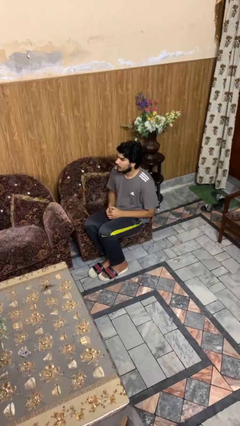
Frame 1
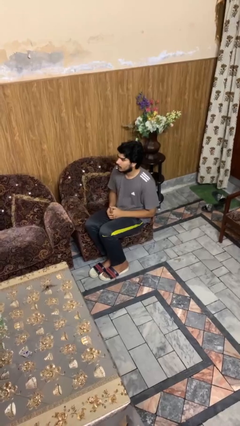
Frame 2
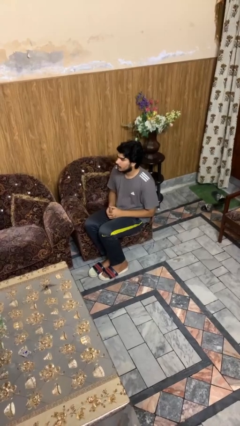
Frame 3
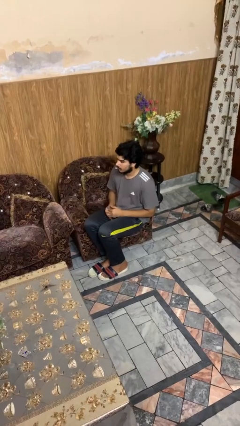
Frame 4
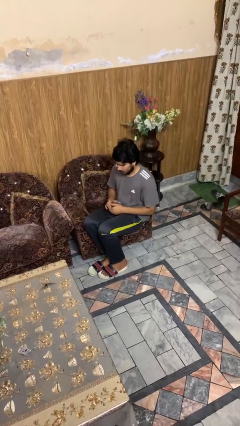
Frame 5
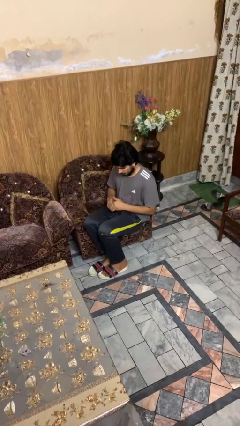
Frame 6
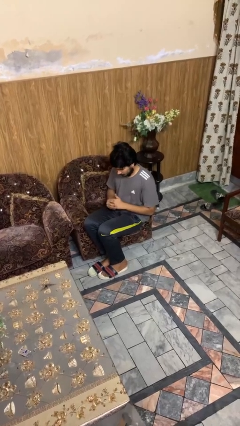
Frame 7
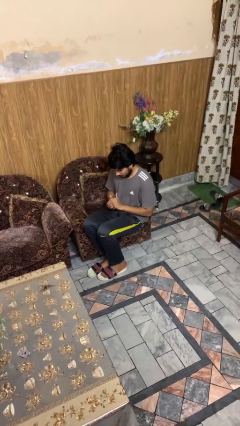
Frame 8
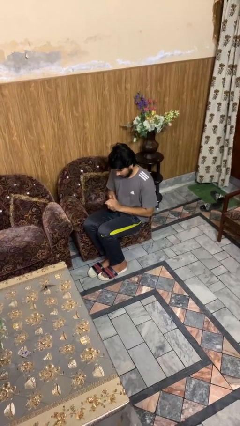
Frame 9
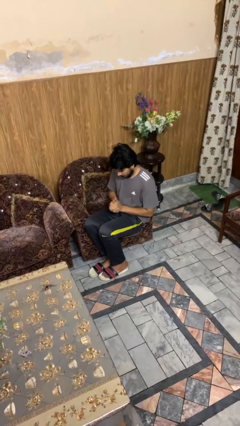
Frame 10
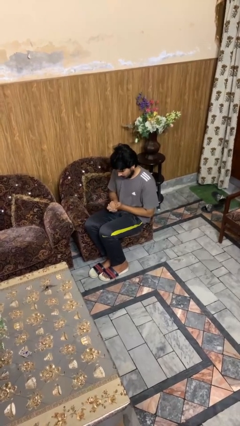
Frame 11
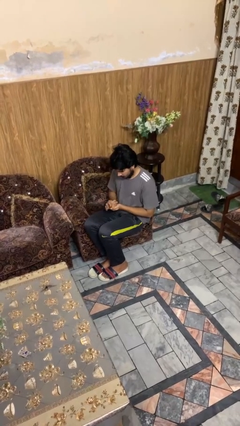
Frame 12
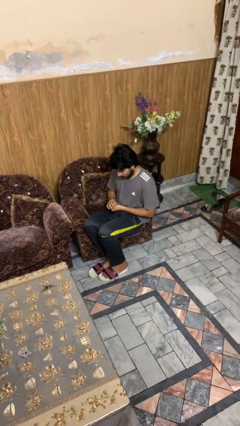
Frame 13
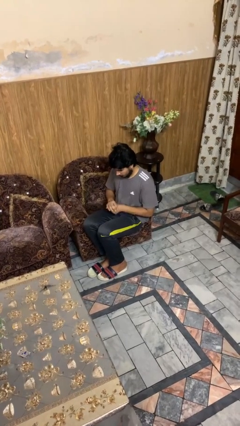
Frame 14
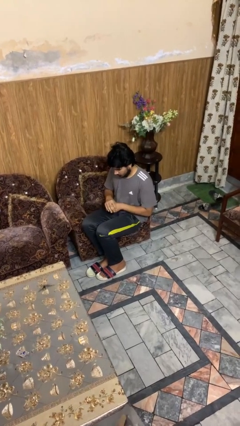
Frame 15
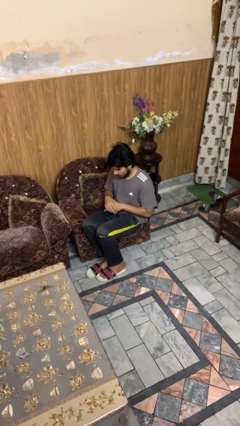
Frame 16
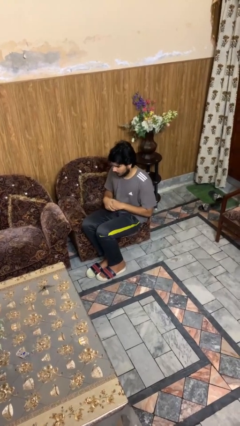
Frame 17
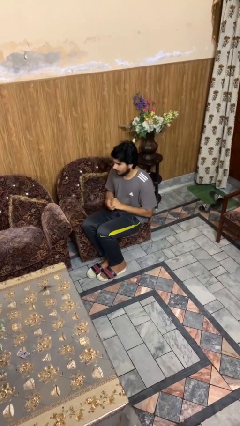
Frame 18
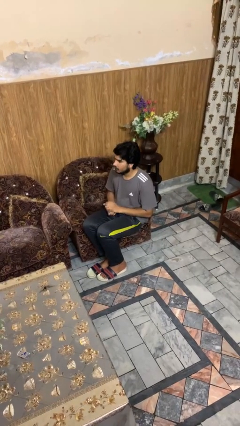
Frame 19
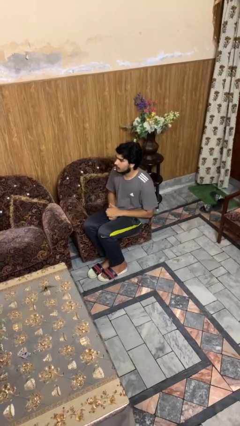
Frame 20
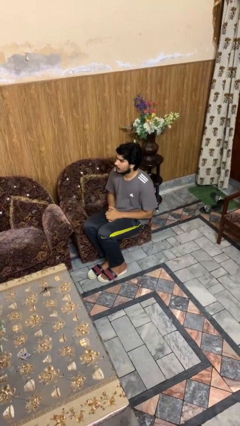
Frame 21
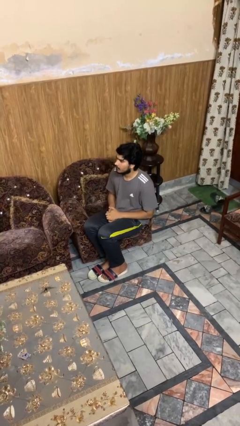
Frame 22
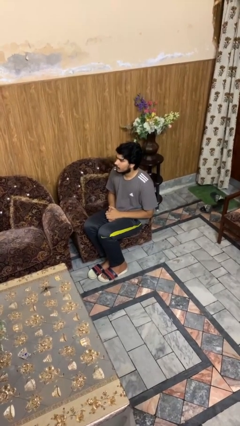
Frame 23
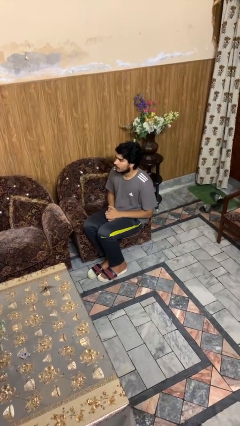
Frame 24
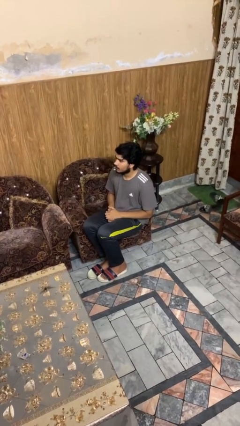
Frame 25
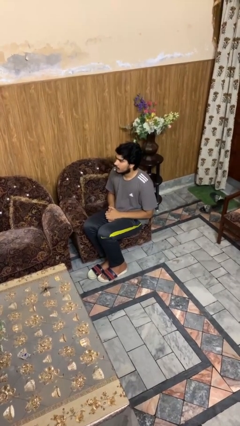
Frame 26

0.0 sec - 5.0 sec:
person looks at hands in lap

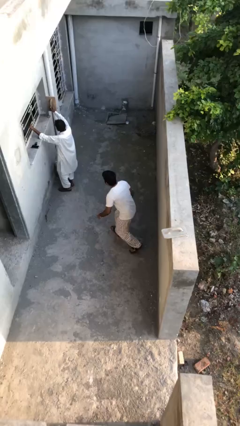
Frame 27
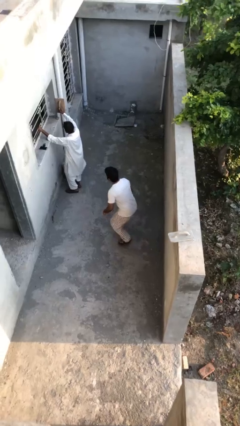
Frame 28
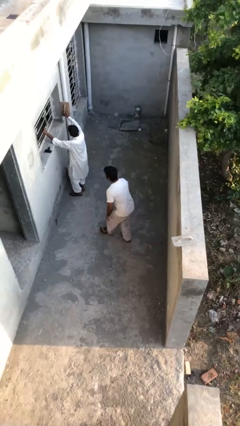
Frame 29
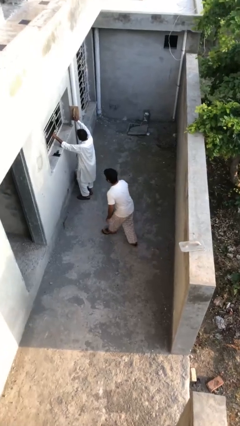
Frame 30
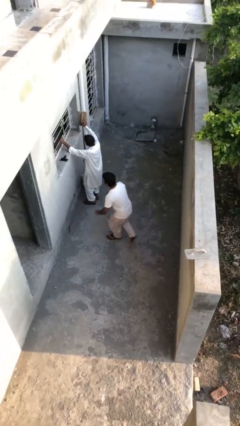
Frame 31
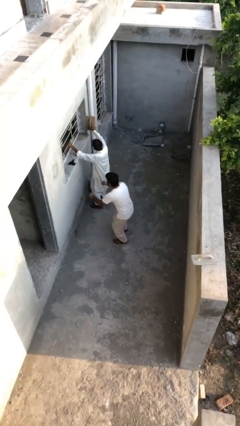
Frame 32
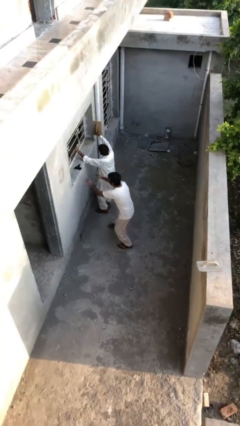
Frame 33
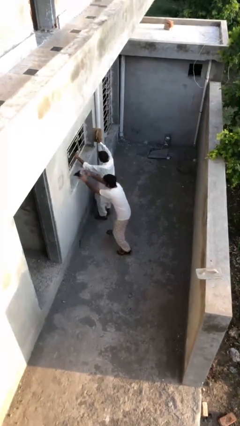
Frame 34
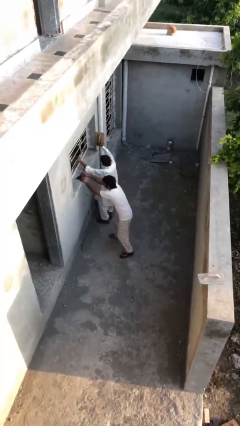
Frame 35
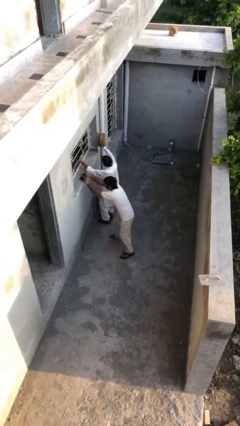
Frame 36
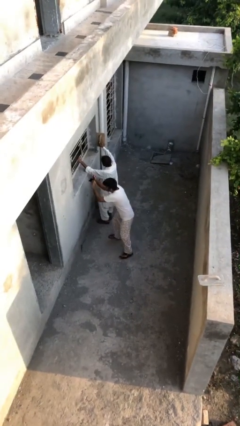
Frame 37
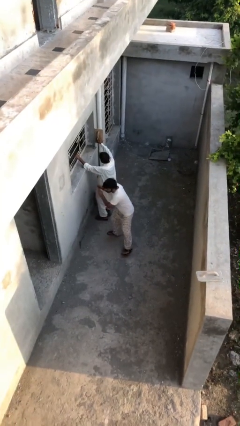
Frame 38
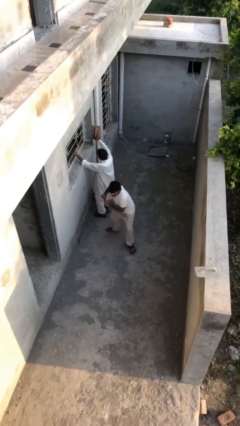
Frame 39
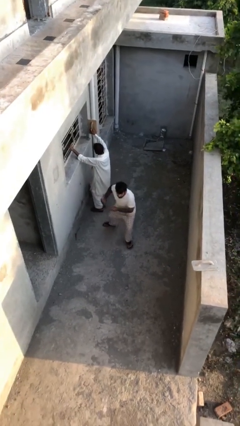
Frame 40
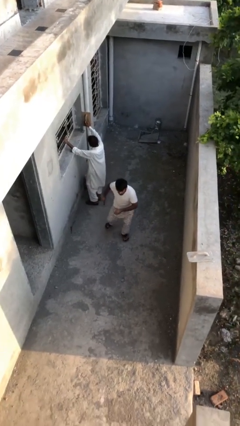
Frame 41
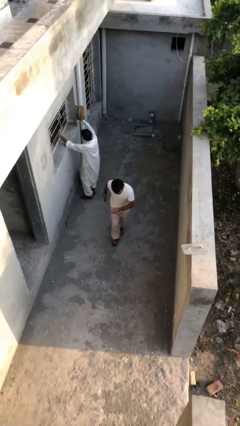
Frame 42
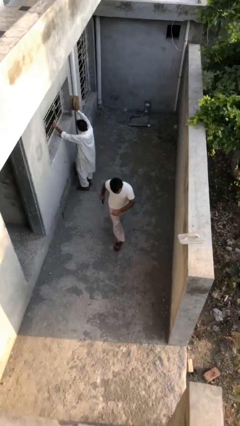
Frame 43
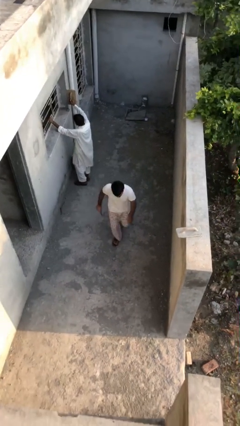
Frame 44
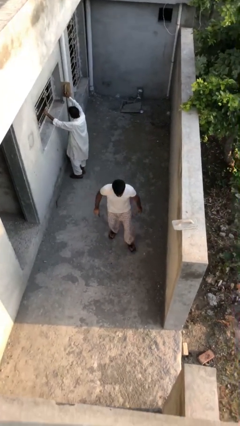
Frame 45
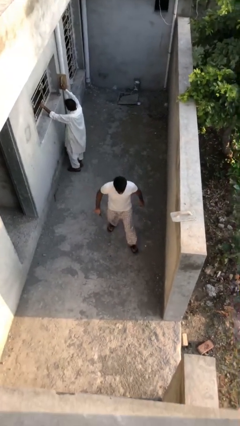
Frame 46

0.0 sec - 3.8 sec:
person steals object from person

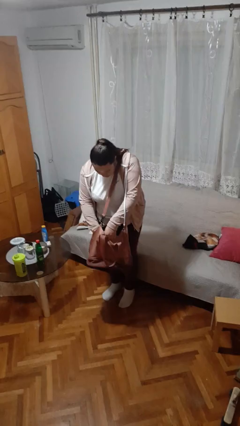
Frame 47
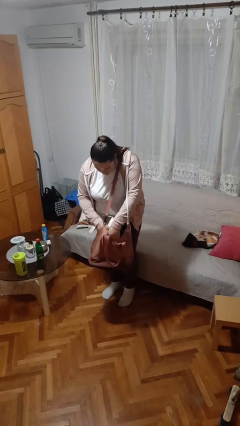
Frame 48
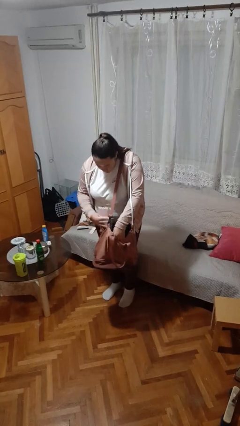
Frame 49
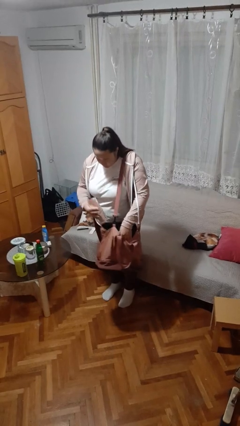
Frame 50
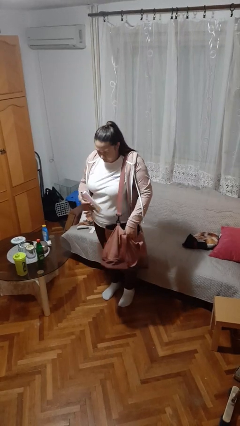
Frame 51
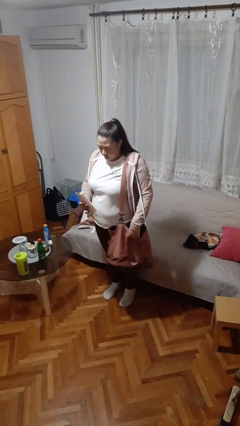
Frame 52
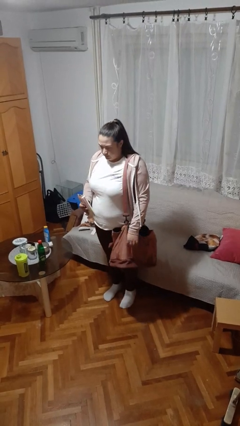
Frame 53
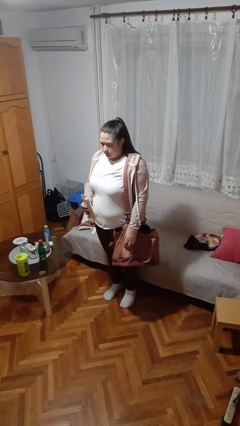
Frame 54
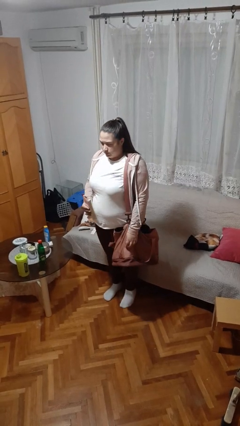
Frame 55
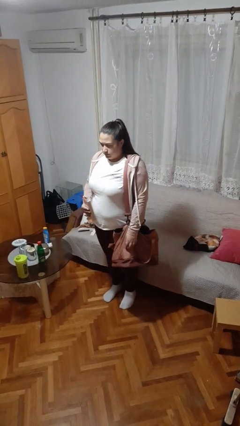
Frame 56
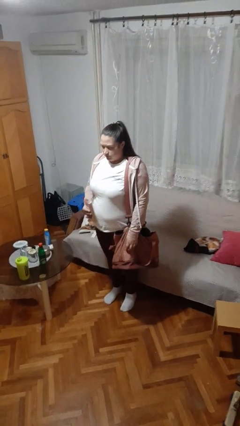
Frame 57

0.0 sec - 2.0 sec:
person takes object from purse

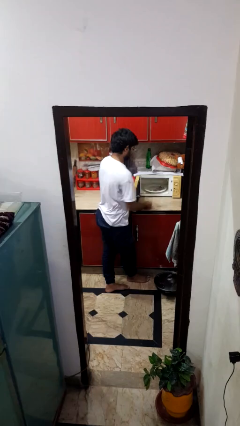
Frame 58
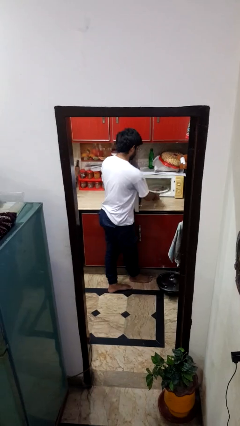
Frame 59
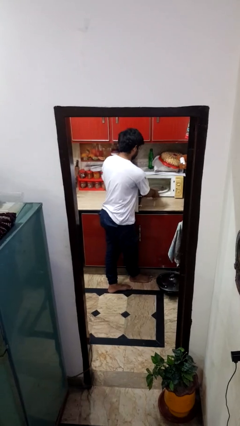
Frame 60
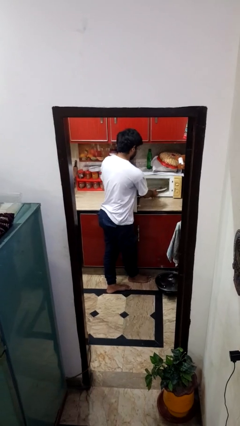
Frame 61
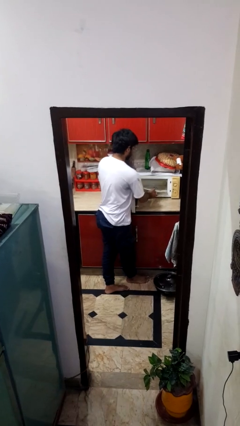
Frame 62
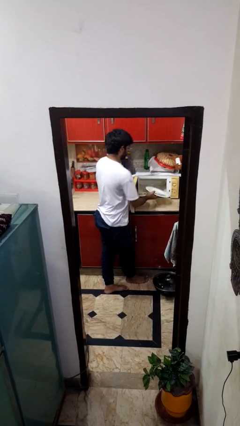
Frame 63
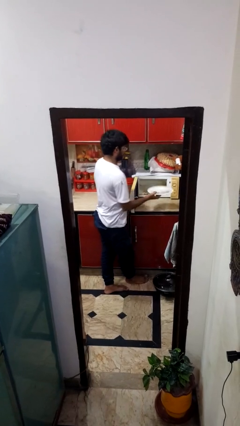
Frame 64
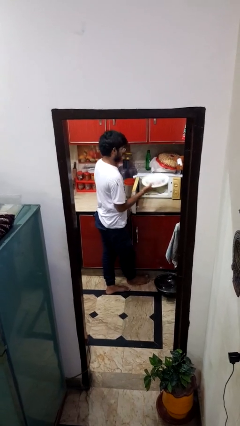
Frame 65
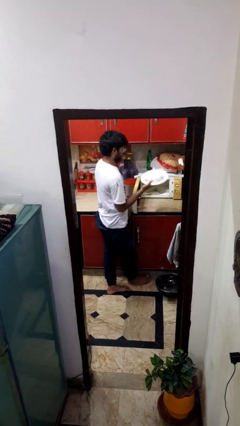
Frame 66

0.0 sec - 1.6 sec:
person takes object from oven

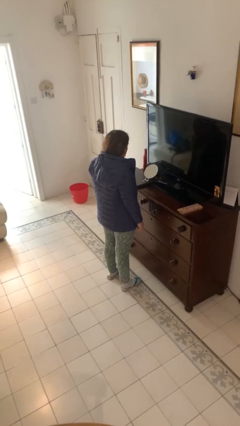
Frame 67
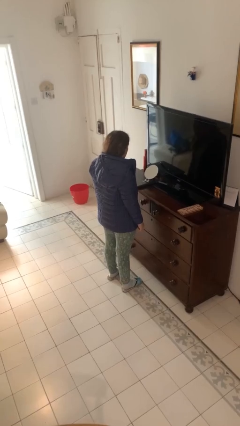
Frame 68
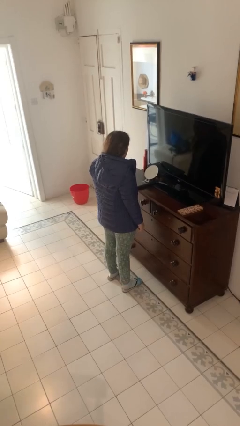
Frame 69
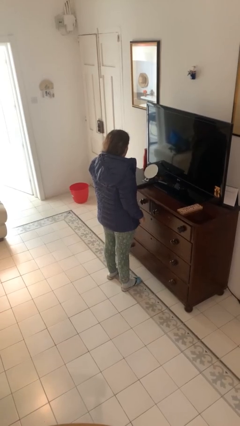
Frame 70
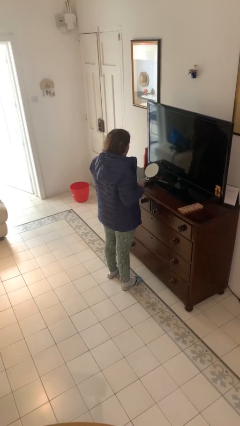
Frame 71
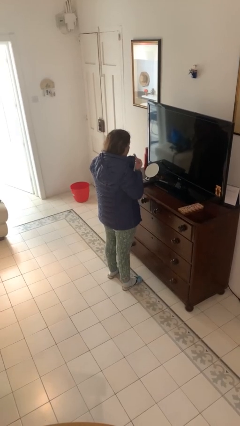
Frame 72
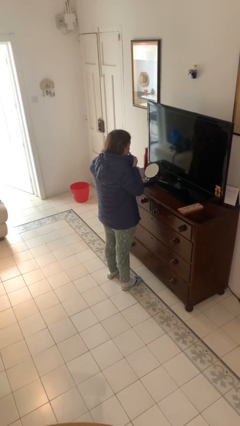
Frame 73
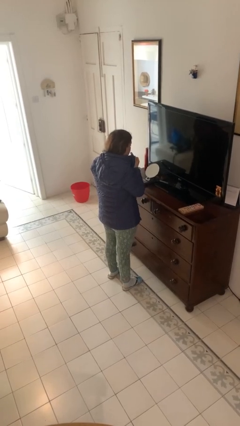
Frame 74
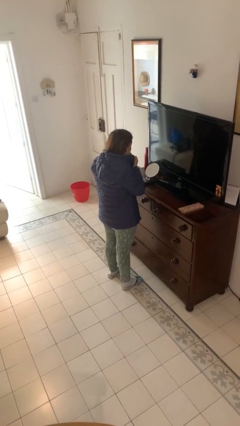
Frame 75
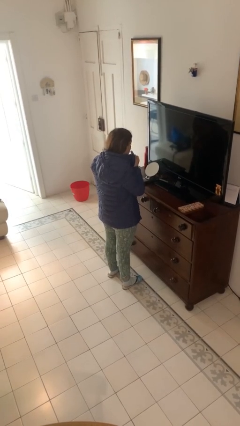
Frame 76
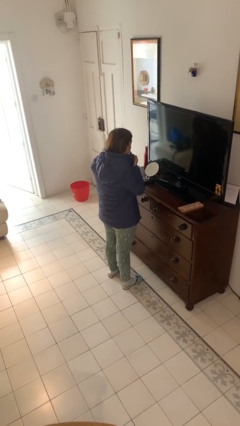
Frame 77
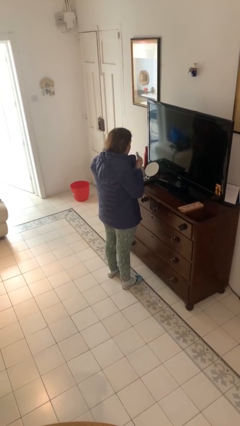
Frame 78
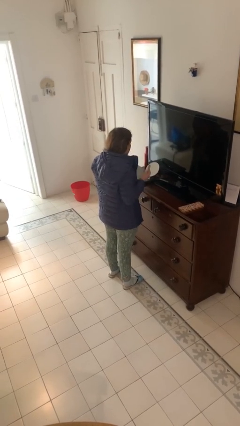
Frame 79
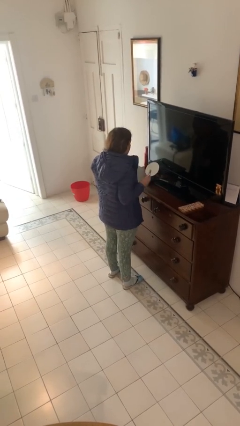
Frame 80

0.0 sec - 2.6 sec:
person applies lip makeup

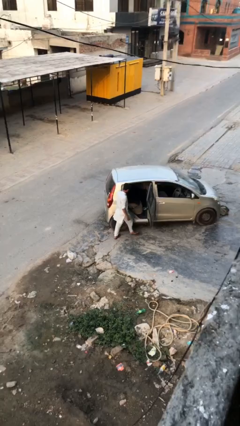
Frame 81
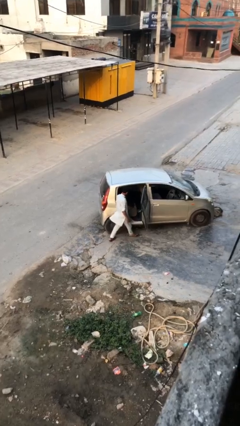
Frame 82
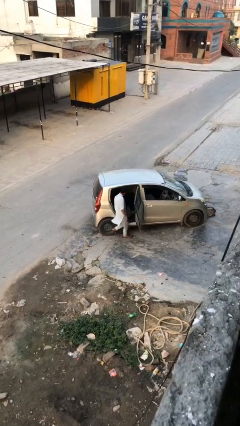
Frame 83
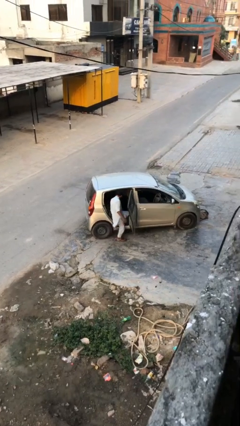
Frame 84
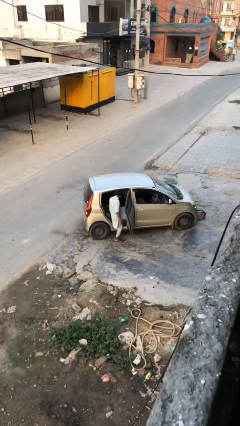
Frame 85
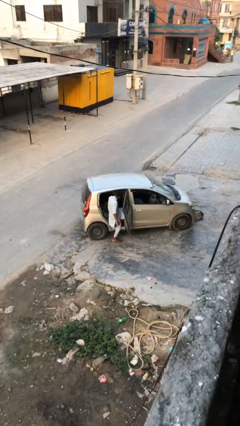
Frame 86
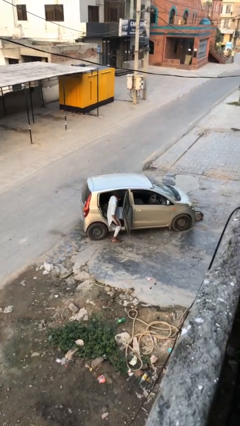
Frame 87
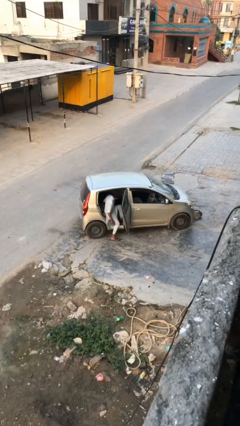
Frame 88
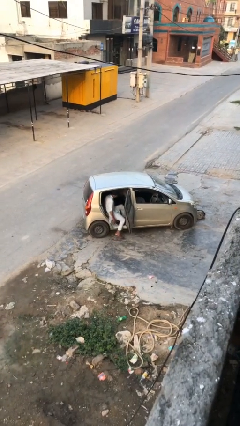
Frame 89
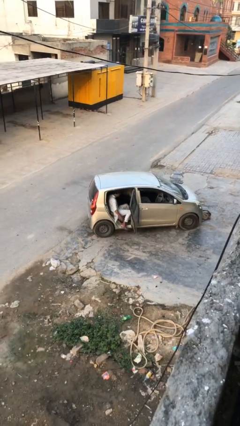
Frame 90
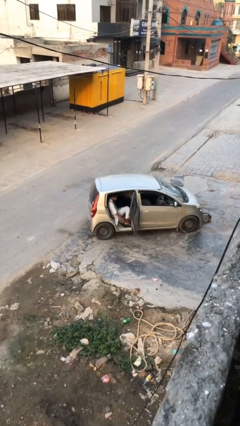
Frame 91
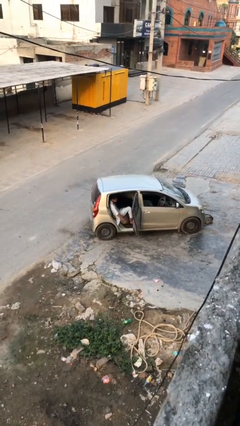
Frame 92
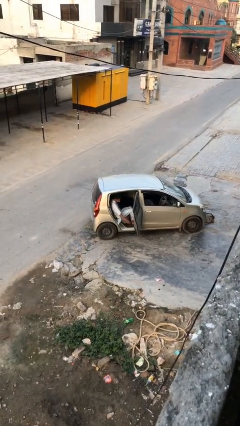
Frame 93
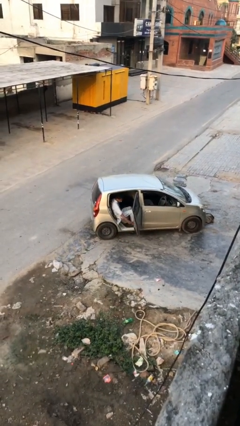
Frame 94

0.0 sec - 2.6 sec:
person enters car
